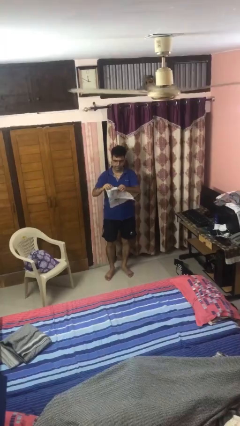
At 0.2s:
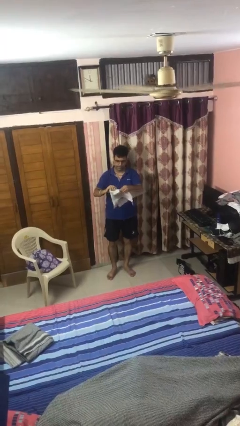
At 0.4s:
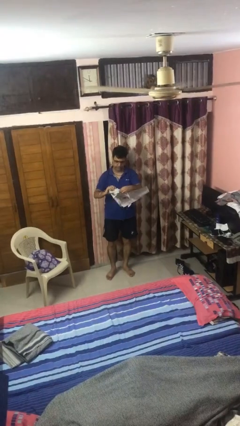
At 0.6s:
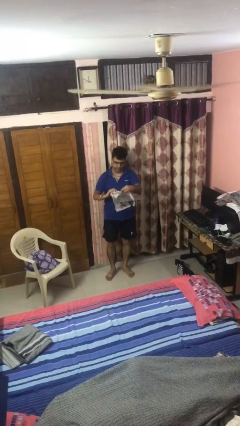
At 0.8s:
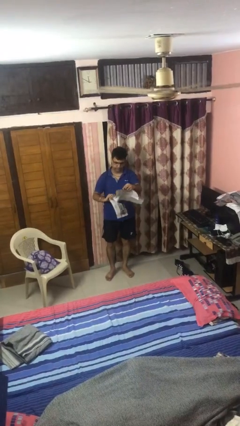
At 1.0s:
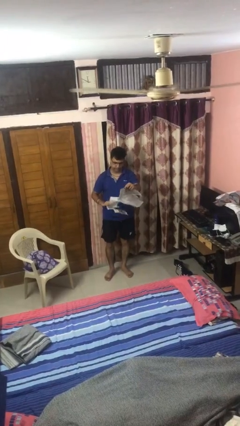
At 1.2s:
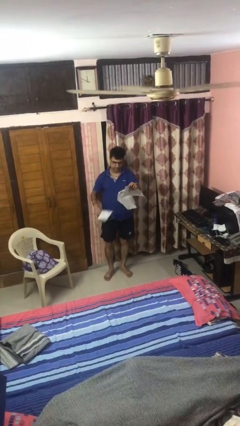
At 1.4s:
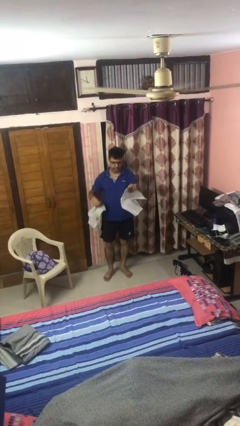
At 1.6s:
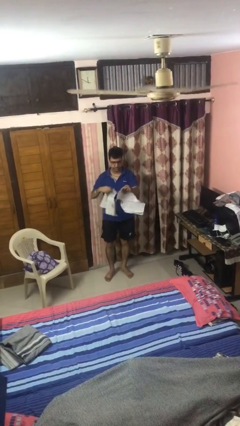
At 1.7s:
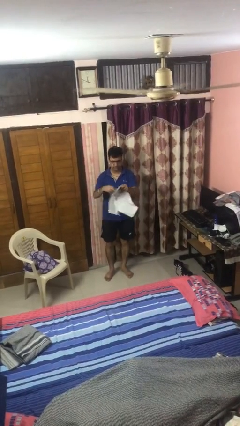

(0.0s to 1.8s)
person tears paper

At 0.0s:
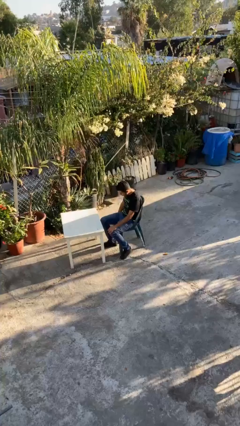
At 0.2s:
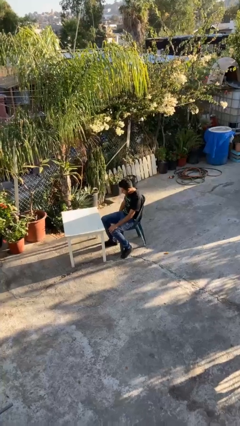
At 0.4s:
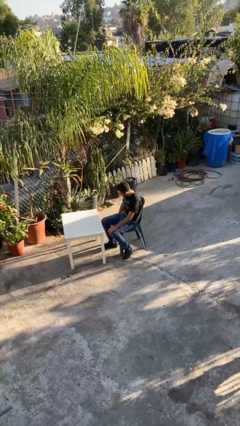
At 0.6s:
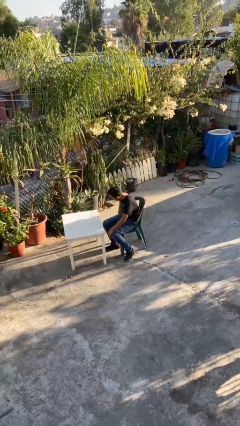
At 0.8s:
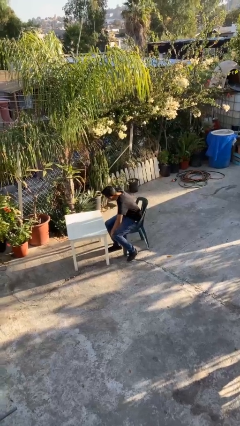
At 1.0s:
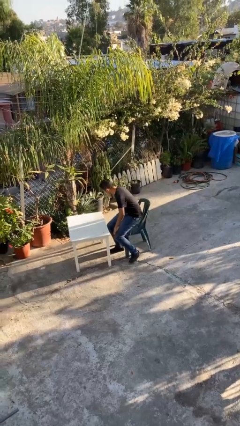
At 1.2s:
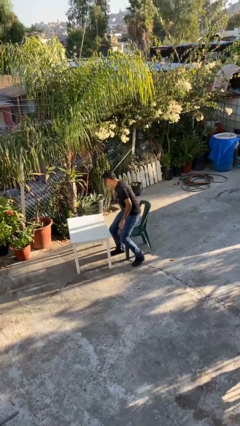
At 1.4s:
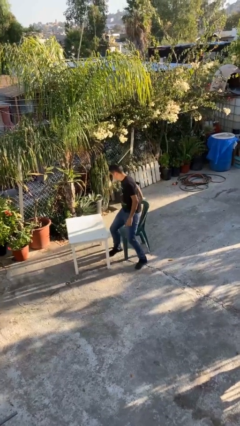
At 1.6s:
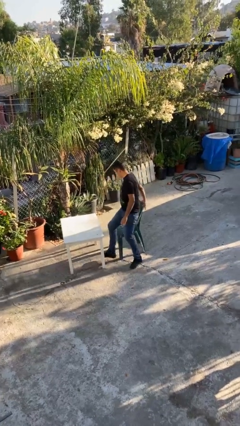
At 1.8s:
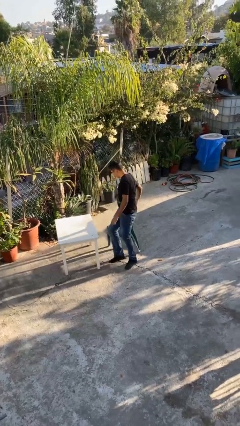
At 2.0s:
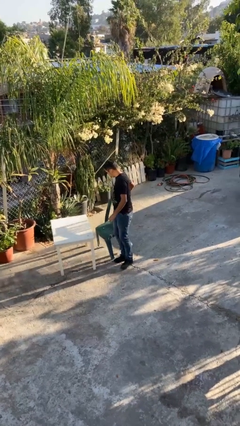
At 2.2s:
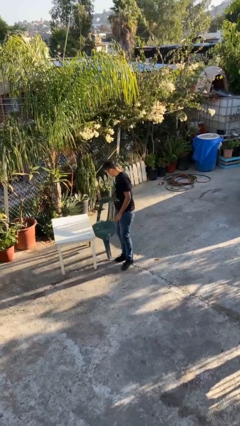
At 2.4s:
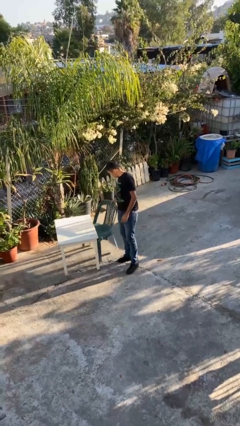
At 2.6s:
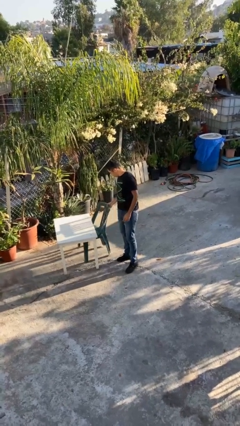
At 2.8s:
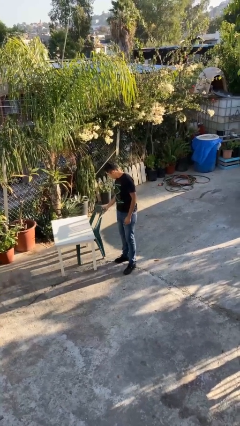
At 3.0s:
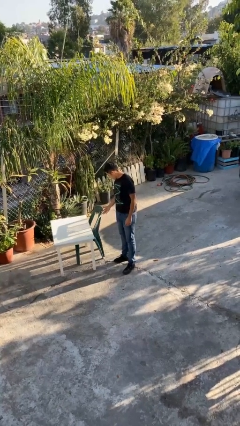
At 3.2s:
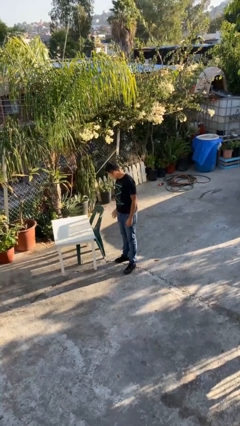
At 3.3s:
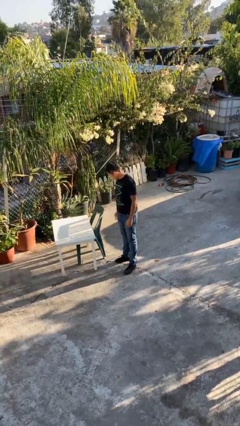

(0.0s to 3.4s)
person stands up

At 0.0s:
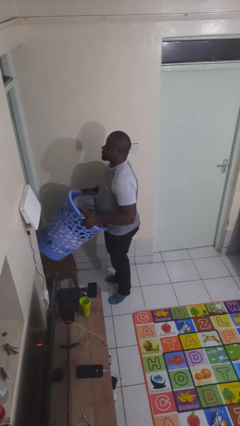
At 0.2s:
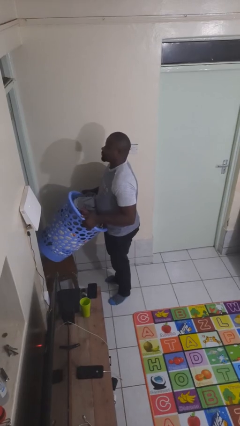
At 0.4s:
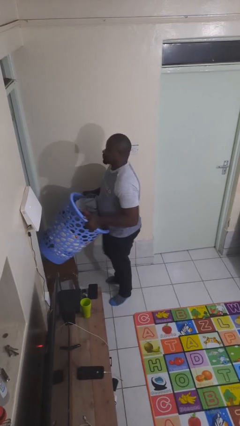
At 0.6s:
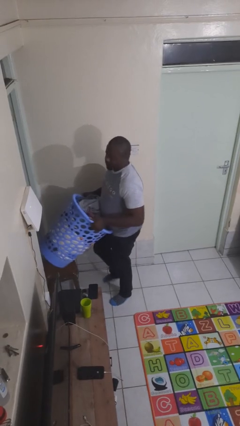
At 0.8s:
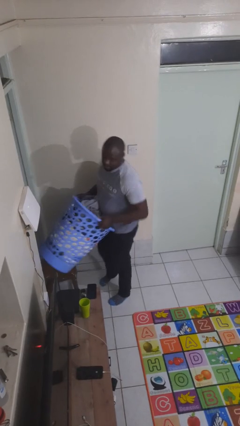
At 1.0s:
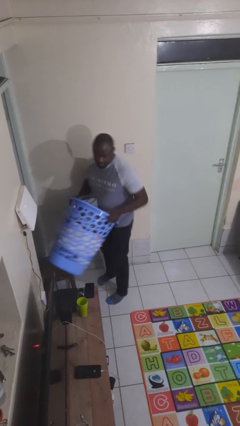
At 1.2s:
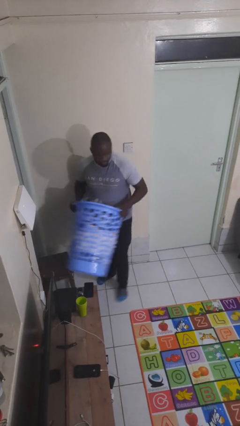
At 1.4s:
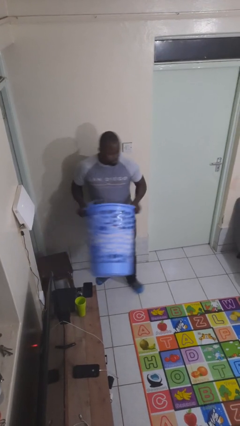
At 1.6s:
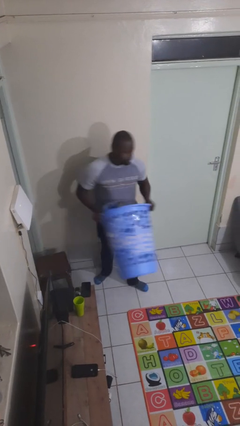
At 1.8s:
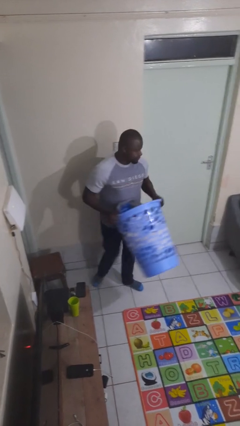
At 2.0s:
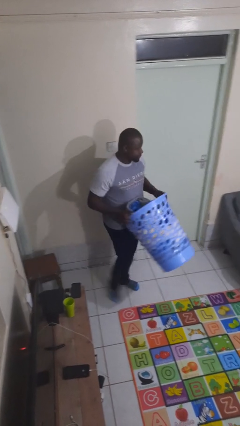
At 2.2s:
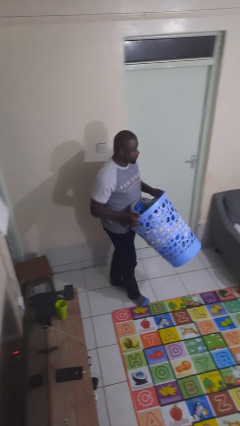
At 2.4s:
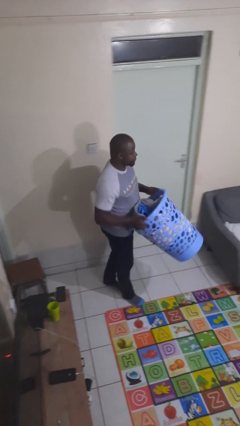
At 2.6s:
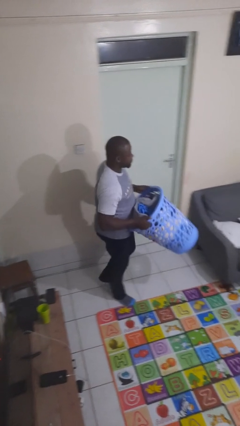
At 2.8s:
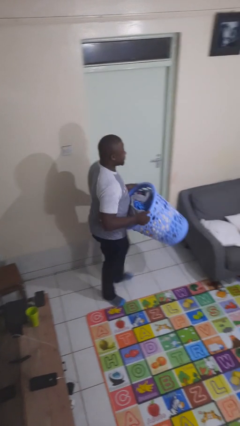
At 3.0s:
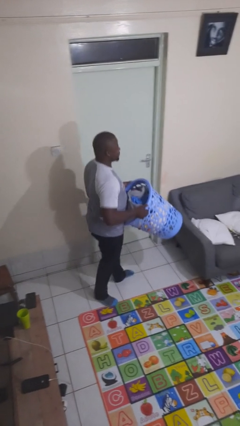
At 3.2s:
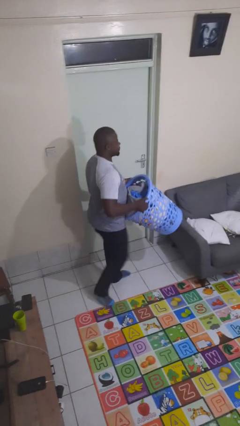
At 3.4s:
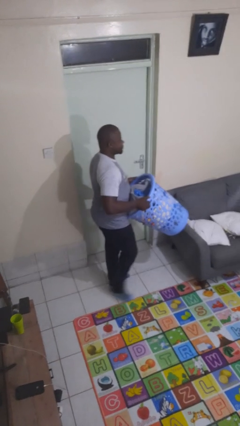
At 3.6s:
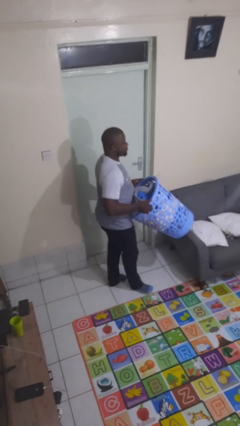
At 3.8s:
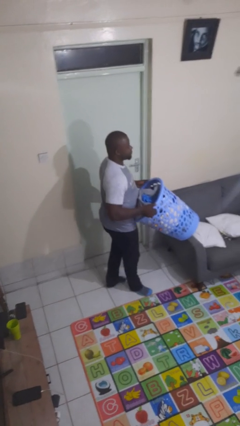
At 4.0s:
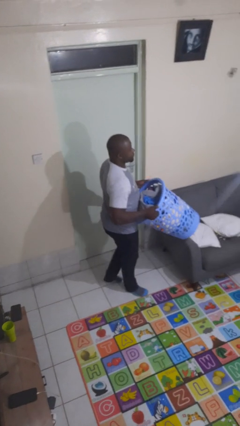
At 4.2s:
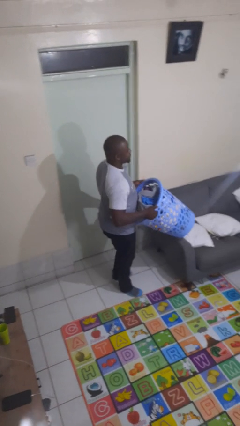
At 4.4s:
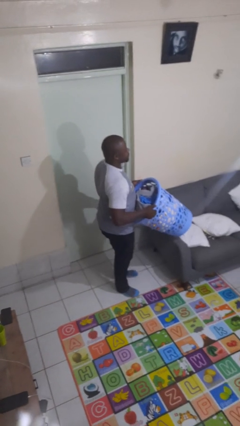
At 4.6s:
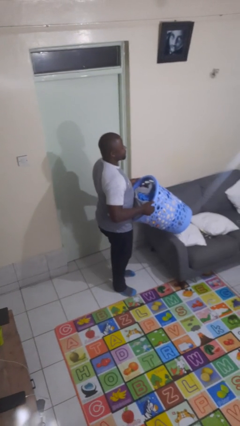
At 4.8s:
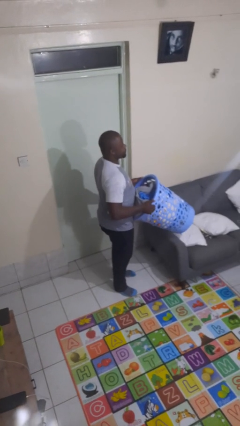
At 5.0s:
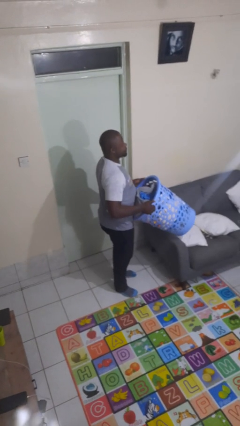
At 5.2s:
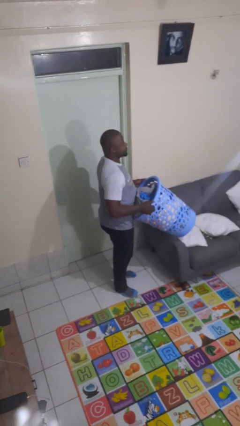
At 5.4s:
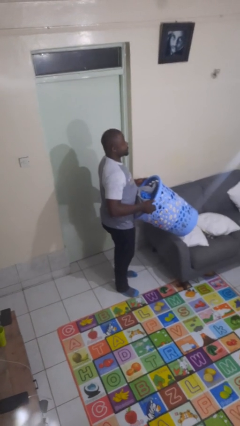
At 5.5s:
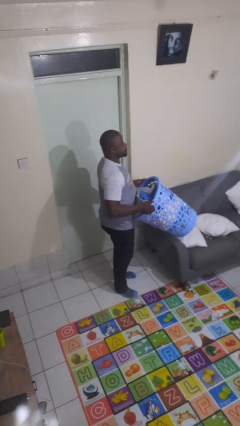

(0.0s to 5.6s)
person carries laundry basket

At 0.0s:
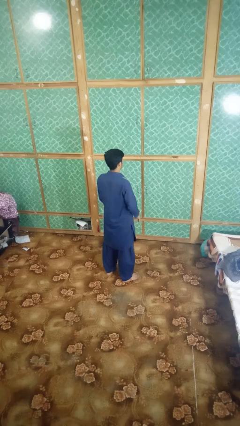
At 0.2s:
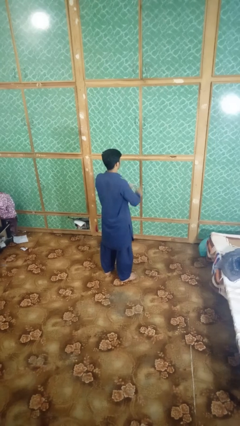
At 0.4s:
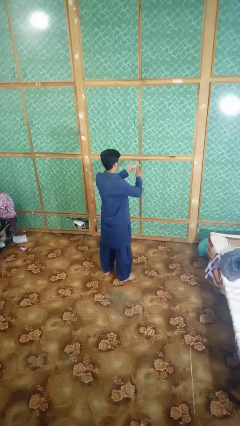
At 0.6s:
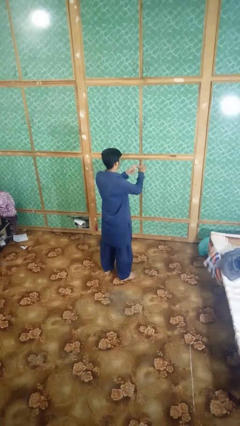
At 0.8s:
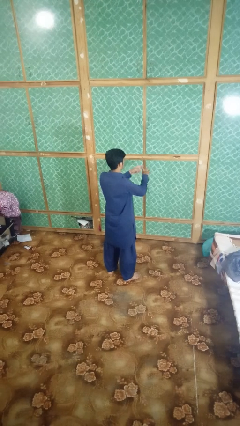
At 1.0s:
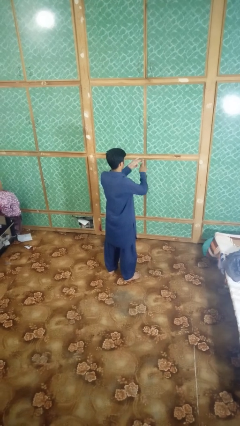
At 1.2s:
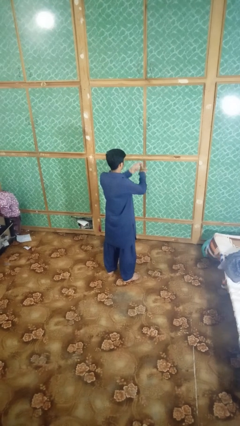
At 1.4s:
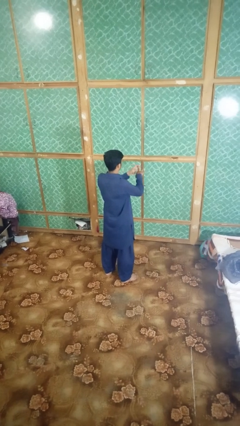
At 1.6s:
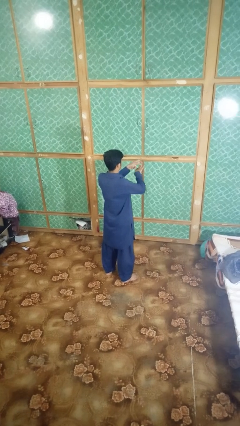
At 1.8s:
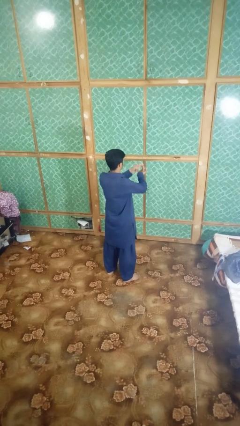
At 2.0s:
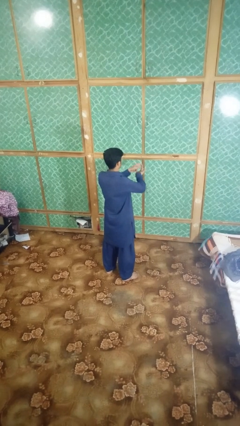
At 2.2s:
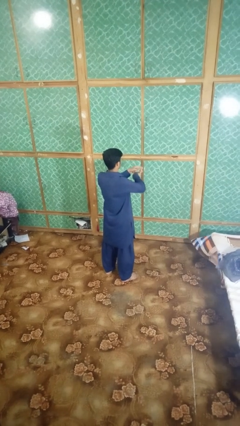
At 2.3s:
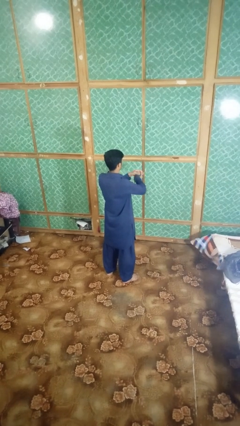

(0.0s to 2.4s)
person snaps fingers

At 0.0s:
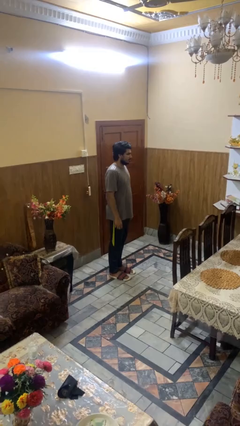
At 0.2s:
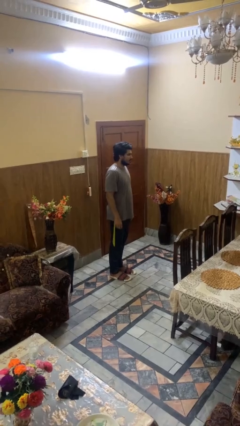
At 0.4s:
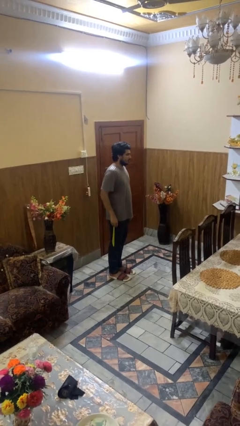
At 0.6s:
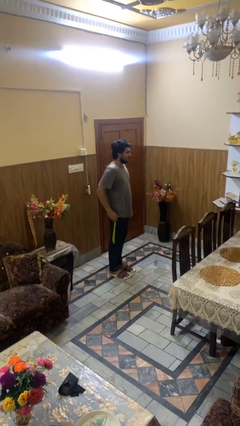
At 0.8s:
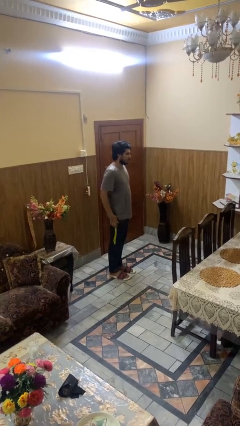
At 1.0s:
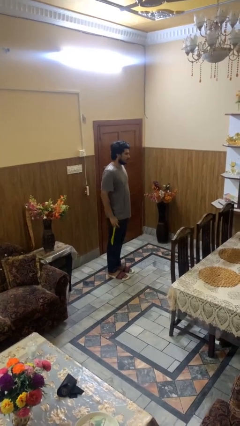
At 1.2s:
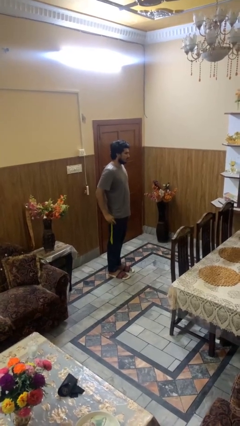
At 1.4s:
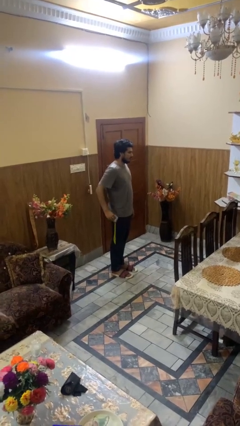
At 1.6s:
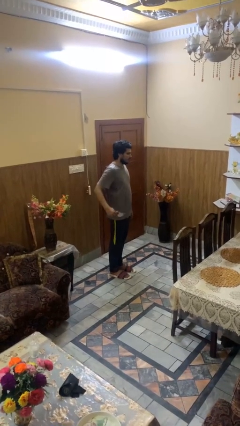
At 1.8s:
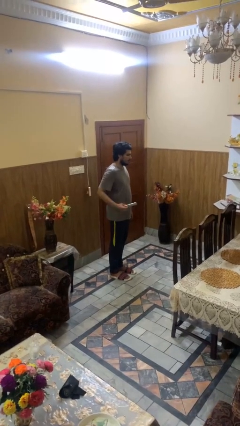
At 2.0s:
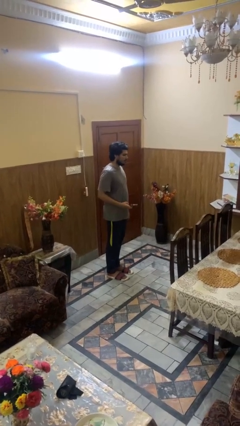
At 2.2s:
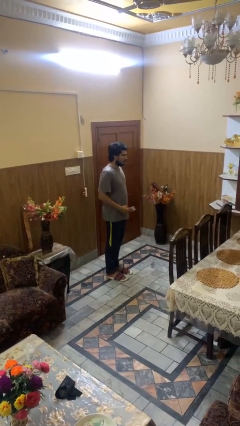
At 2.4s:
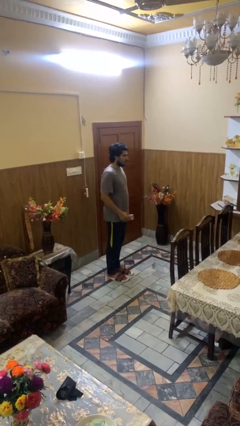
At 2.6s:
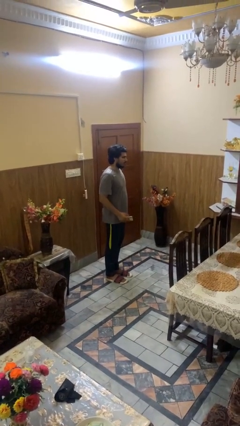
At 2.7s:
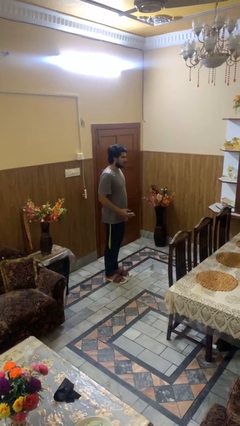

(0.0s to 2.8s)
person takes phone from pocket

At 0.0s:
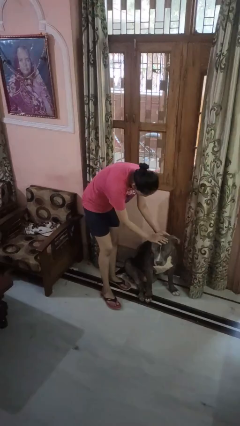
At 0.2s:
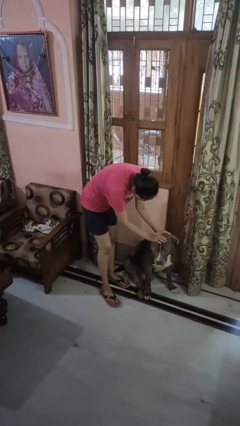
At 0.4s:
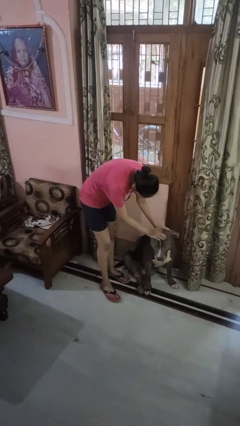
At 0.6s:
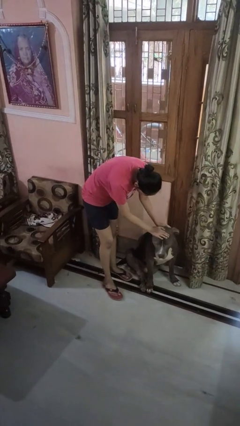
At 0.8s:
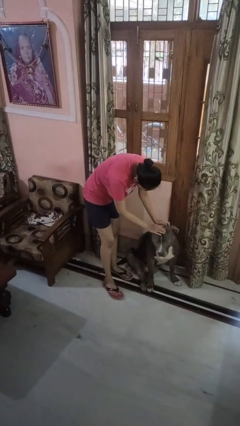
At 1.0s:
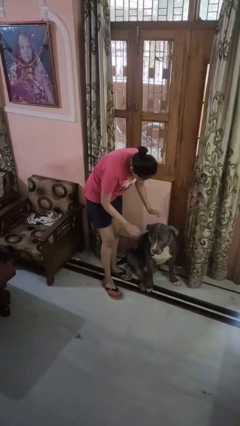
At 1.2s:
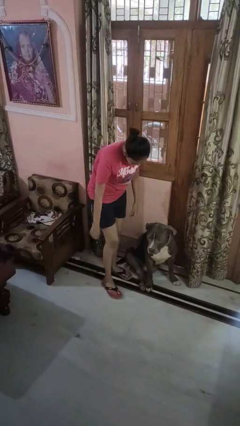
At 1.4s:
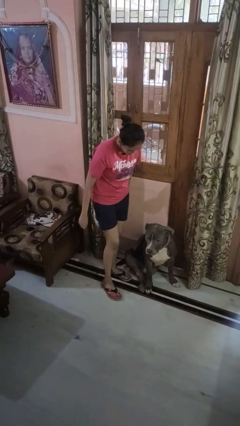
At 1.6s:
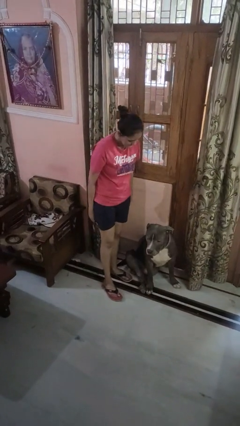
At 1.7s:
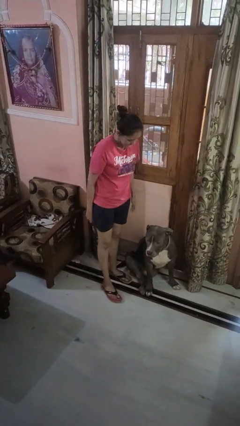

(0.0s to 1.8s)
person pets dog
